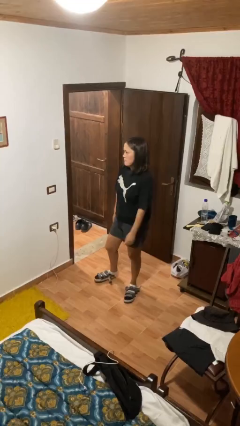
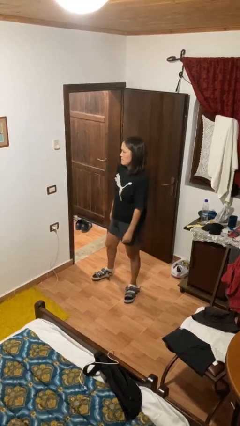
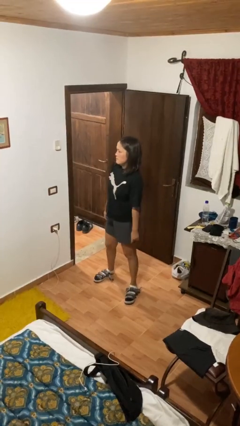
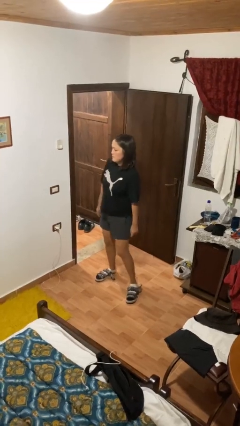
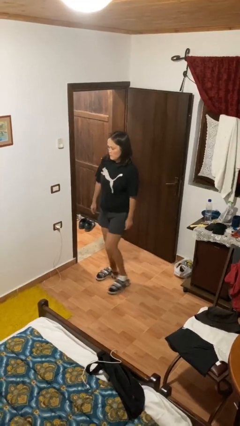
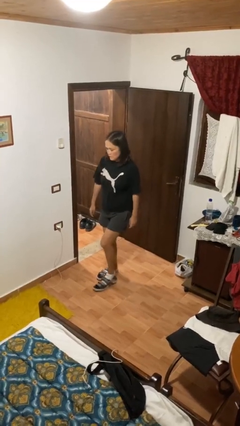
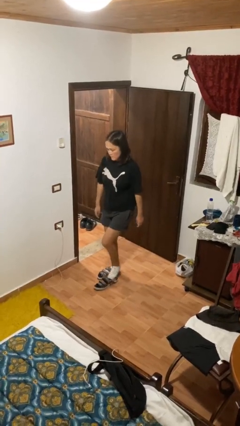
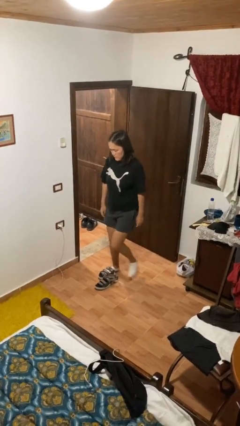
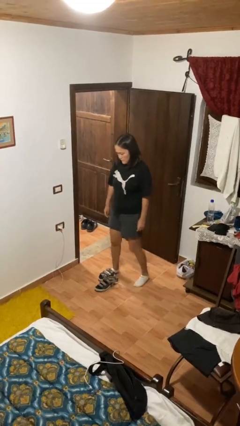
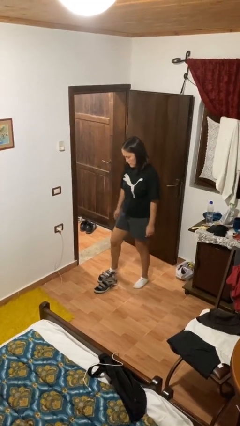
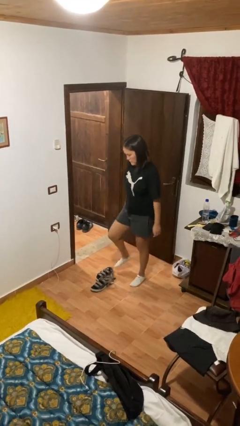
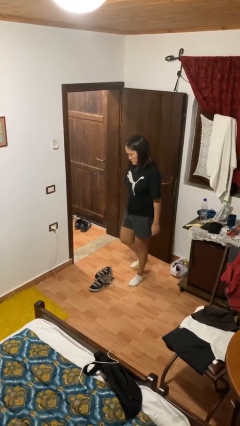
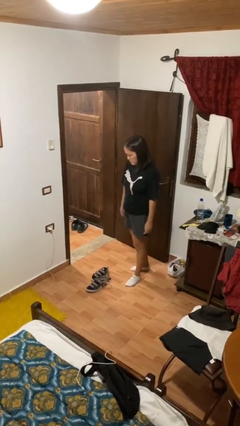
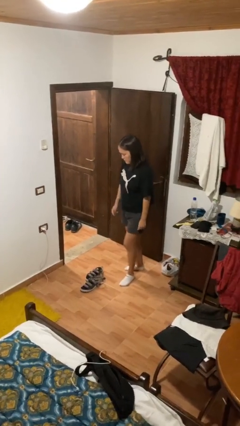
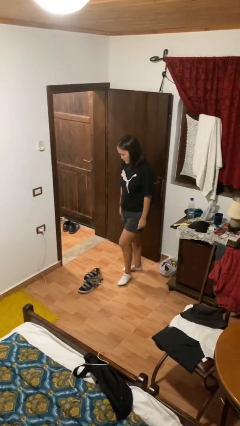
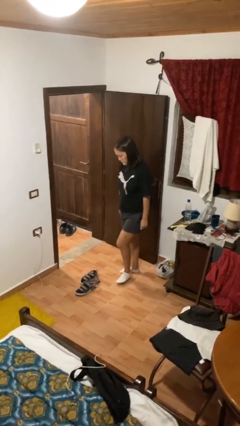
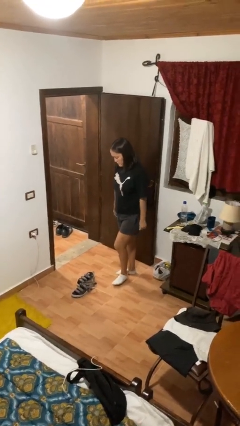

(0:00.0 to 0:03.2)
person takes off shoes

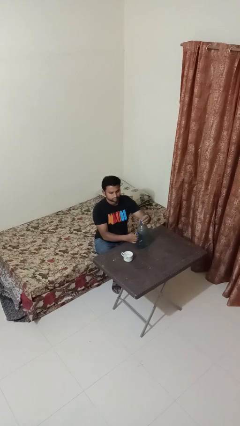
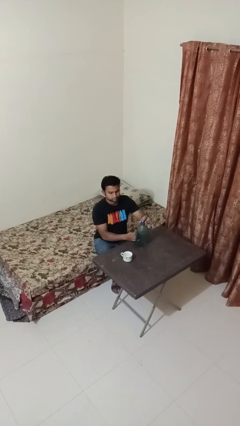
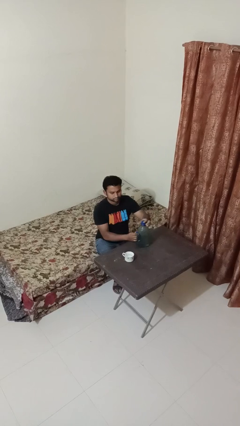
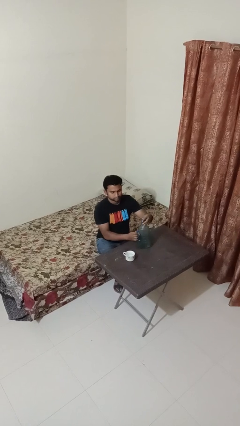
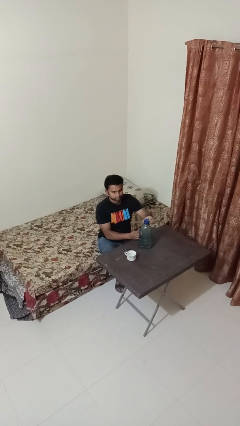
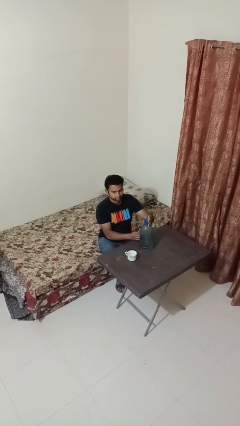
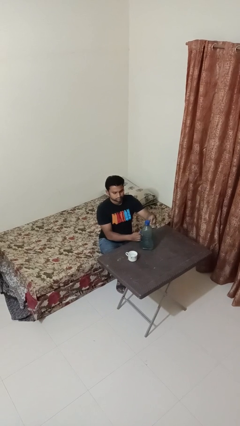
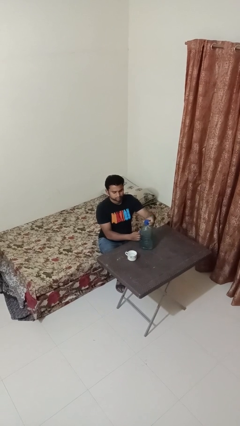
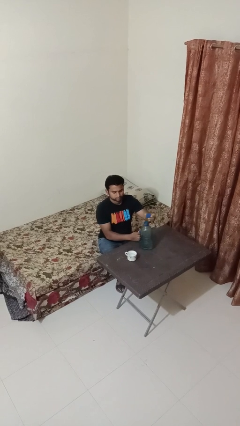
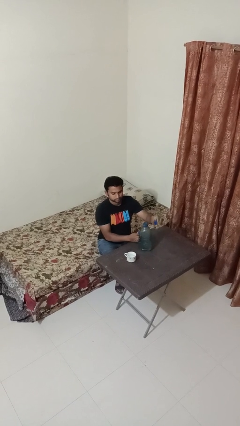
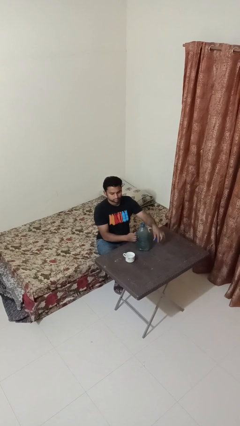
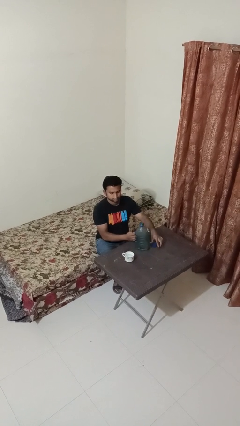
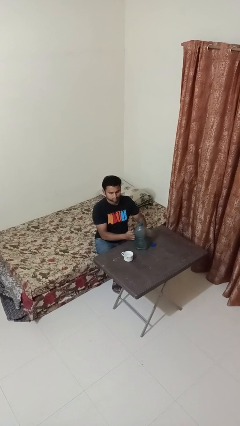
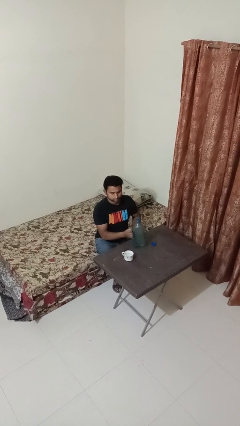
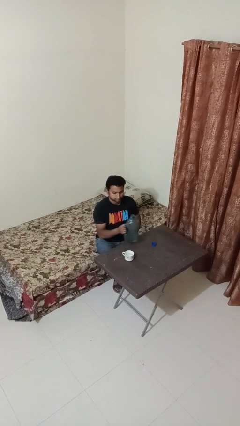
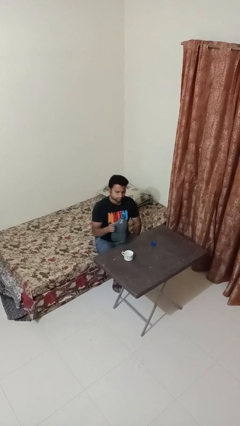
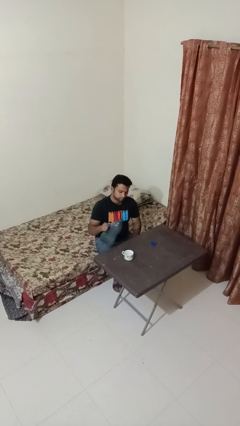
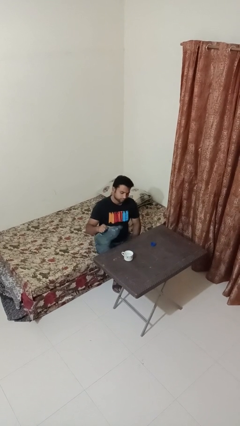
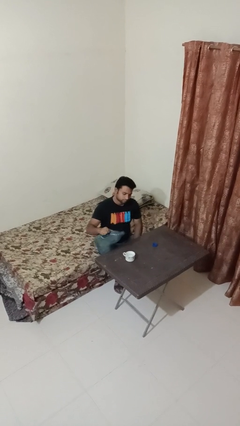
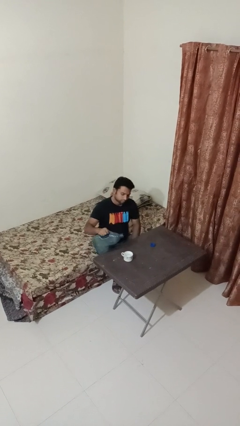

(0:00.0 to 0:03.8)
person unscrews lid from bottle

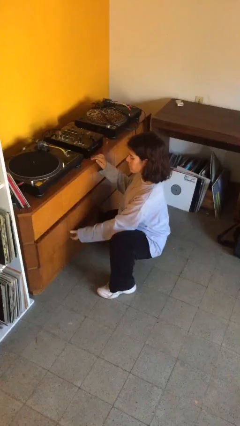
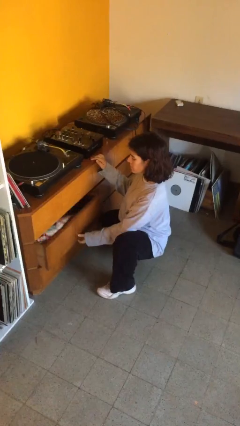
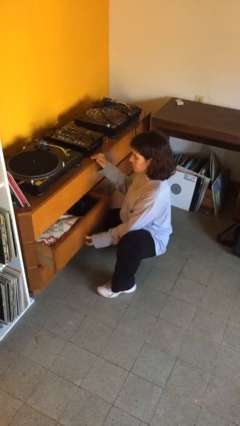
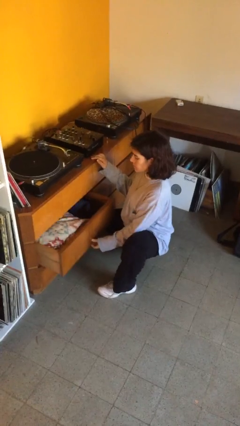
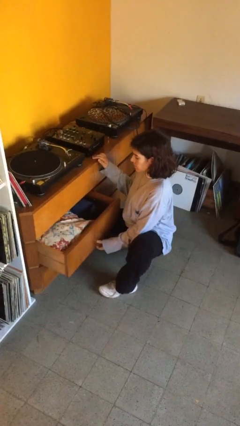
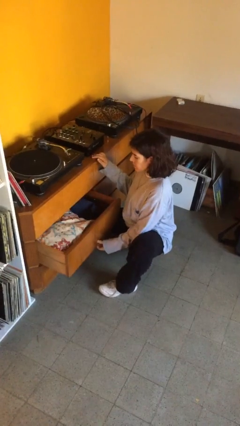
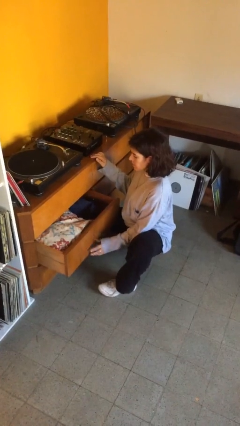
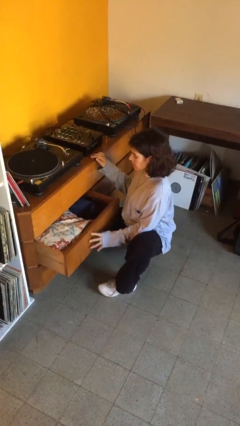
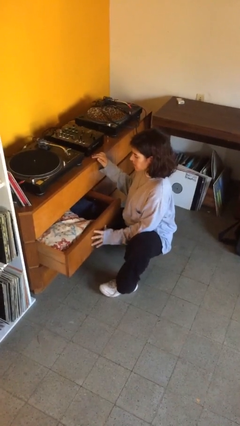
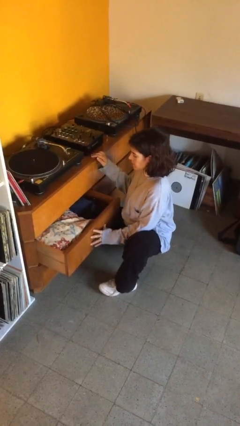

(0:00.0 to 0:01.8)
person opens dresser drawer

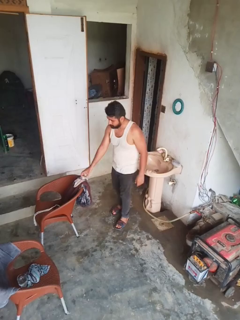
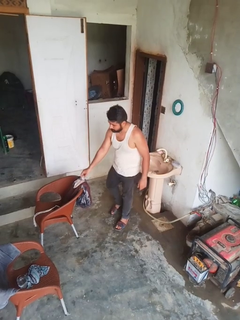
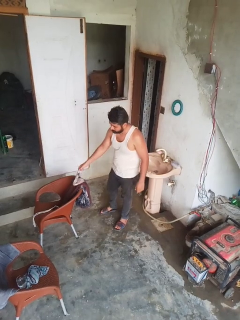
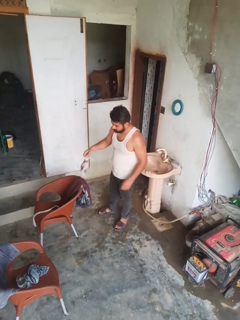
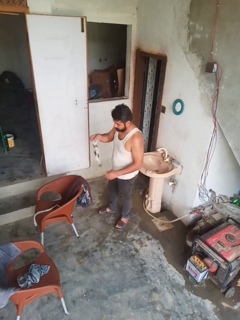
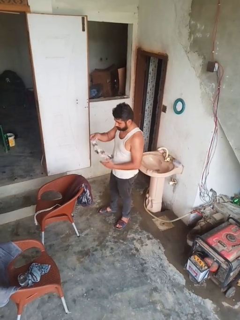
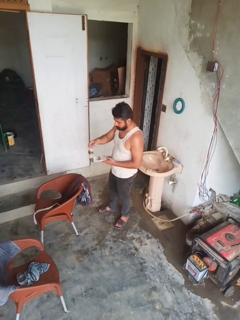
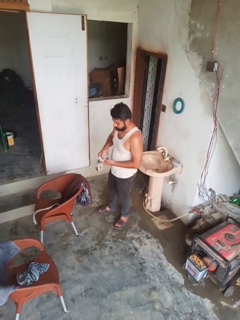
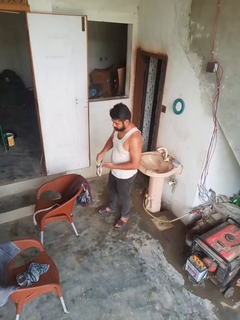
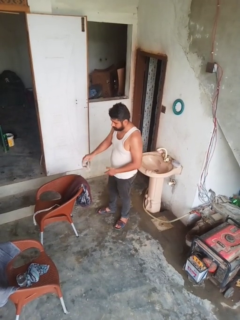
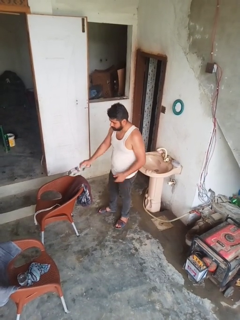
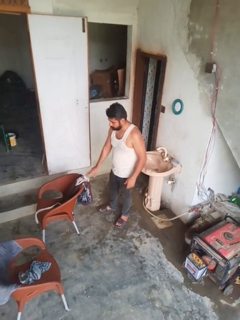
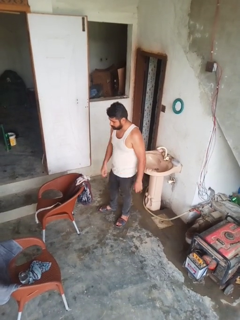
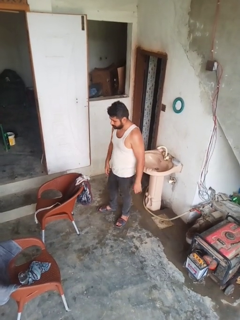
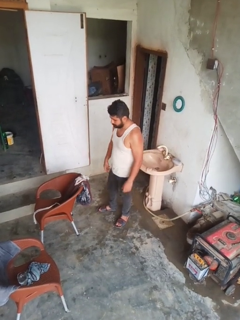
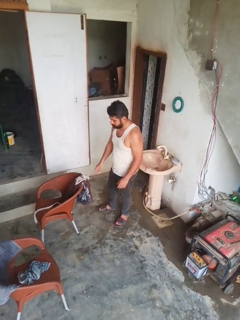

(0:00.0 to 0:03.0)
person folds socks

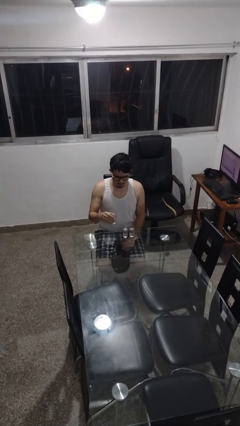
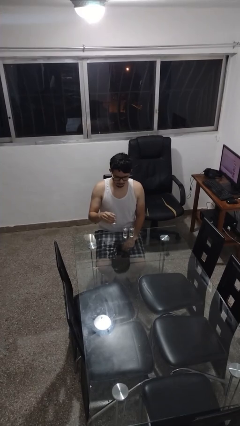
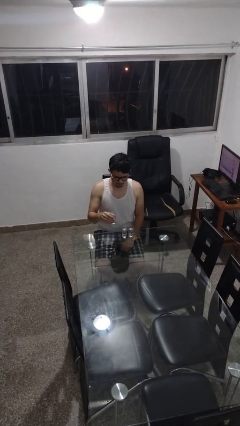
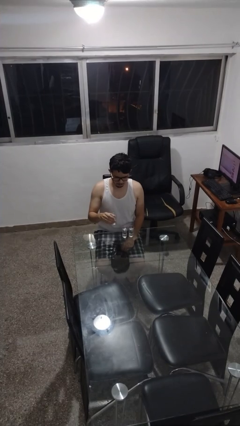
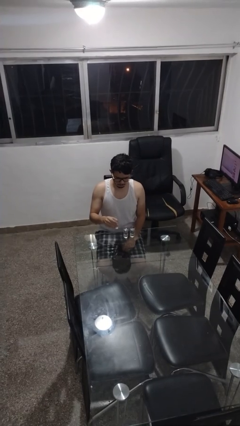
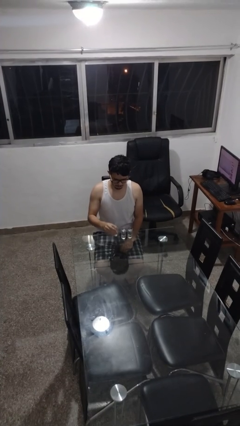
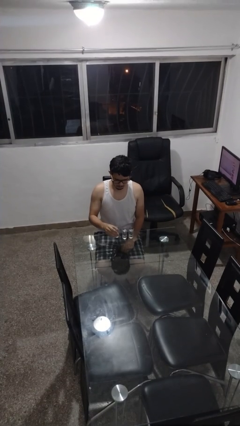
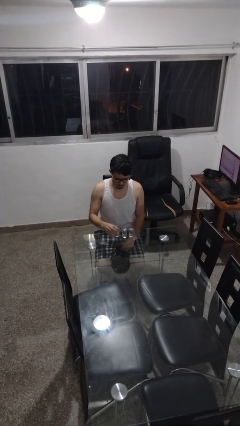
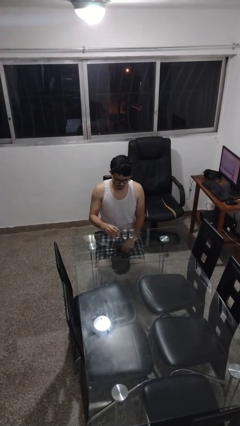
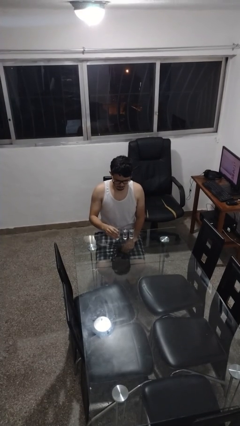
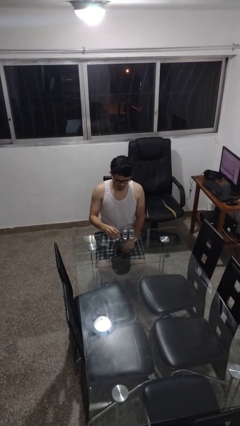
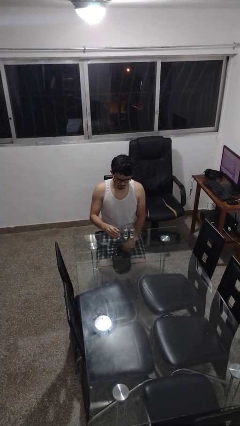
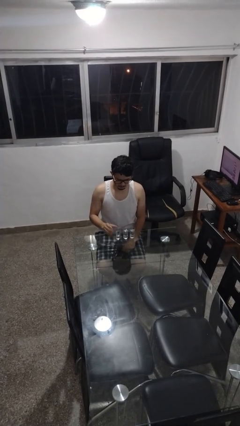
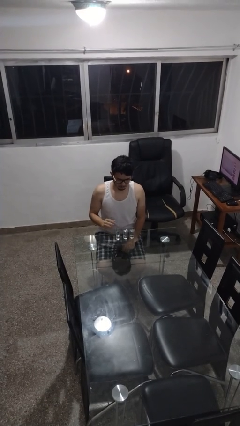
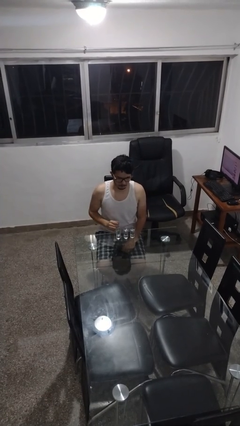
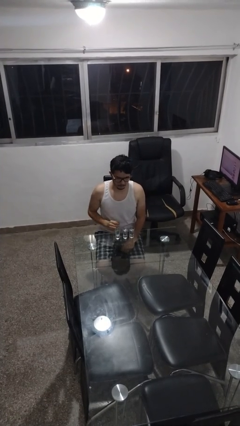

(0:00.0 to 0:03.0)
person puts down object on table

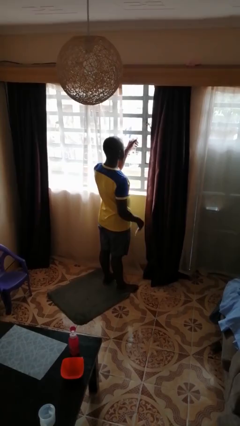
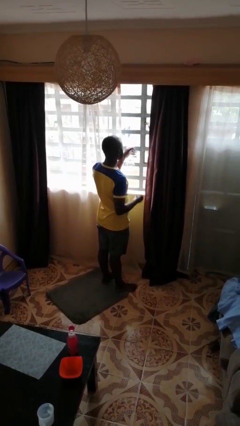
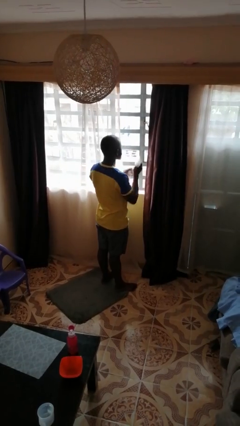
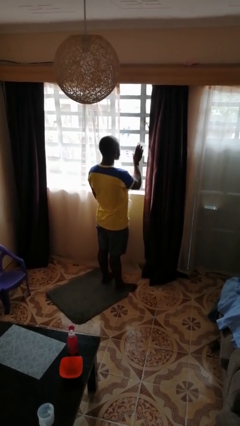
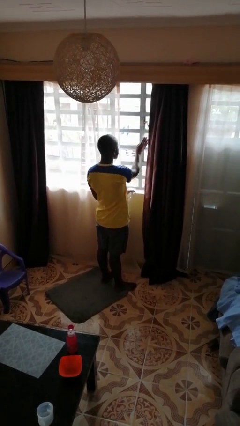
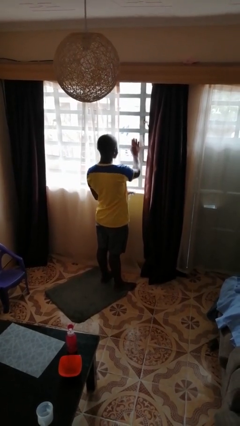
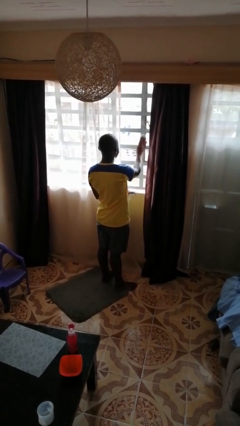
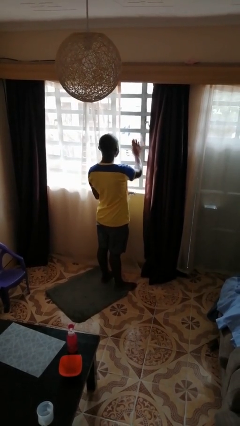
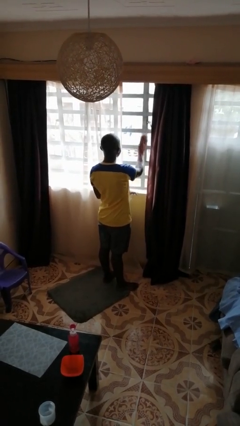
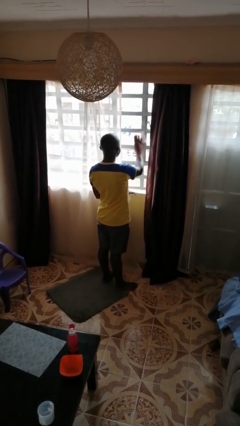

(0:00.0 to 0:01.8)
person washes window

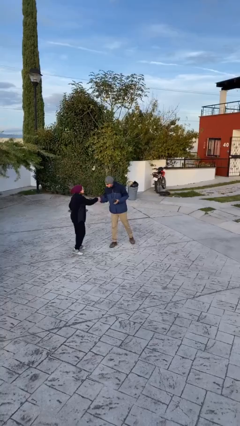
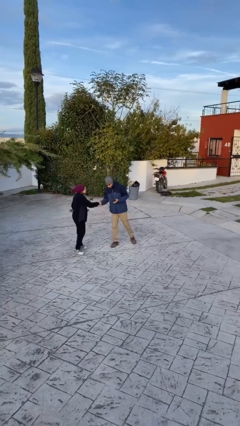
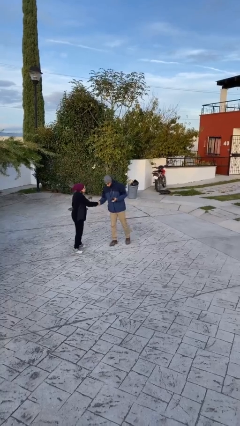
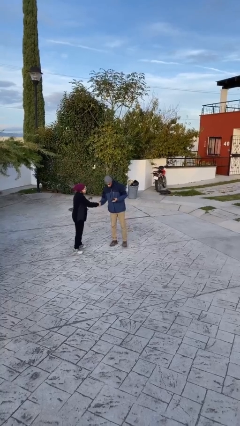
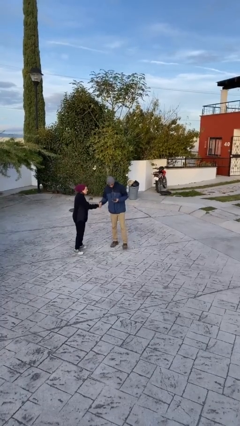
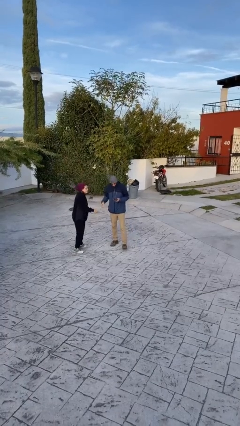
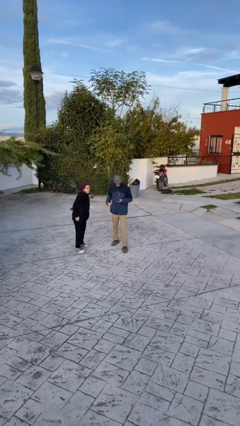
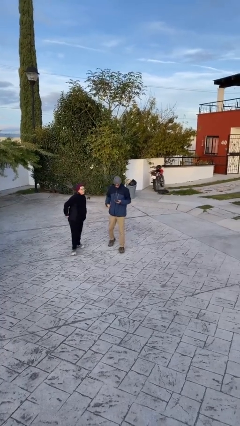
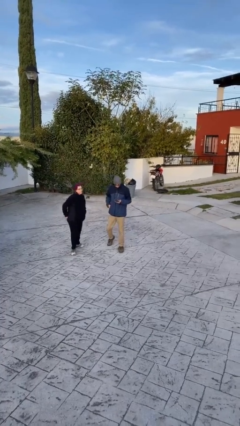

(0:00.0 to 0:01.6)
person shakes hand
